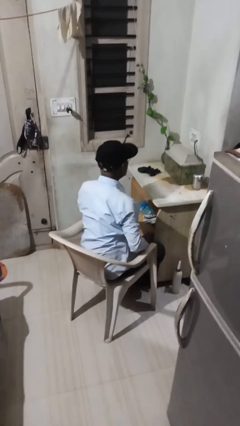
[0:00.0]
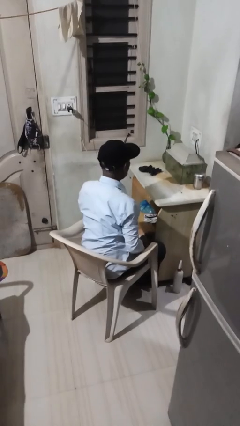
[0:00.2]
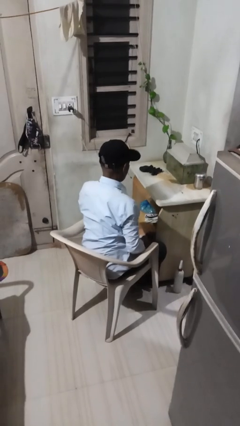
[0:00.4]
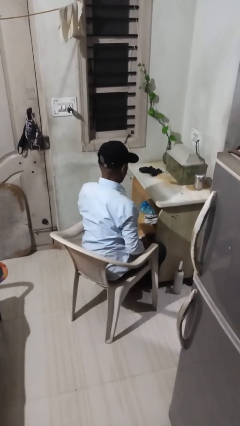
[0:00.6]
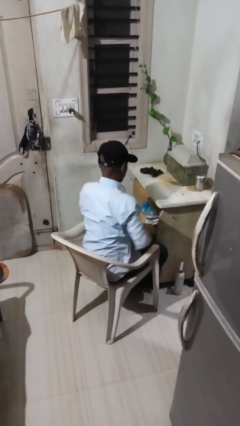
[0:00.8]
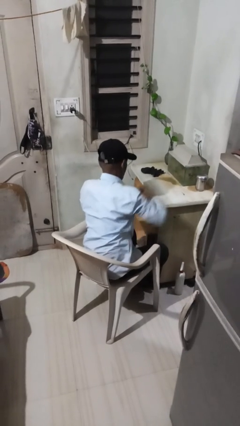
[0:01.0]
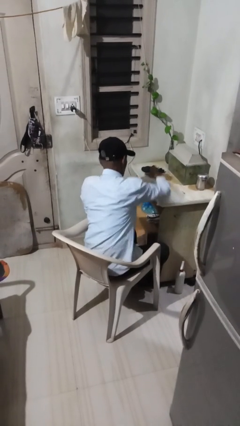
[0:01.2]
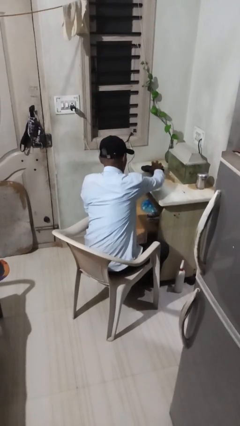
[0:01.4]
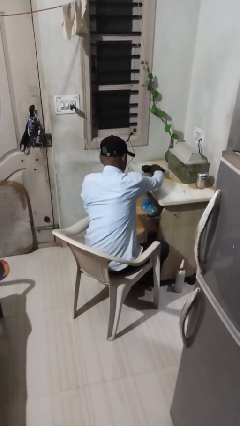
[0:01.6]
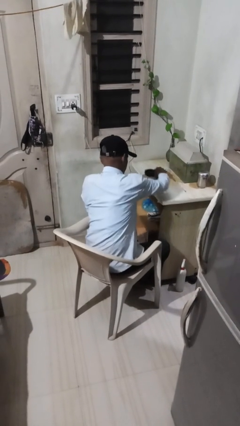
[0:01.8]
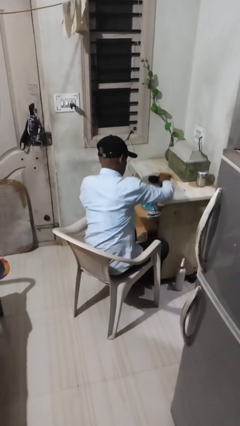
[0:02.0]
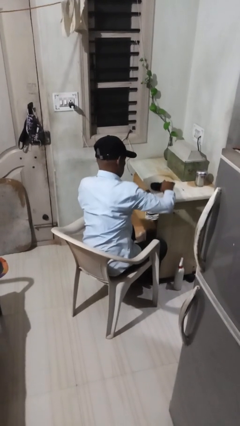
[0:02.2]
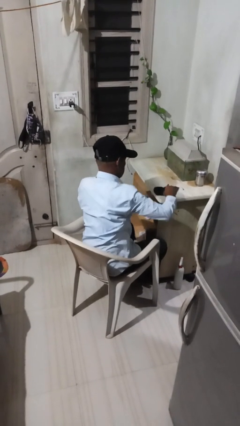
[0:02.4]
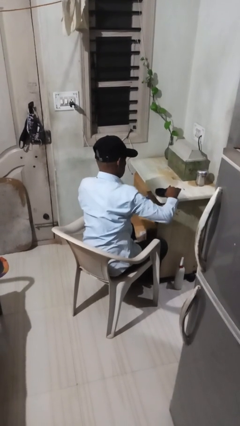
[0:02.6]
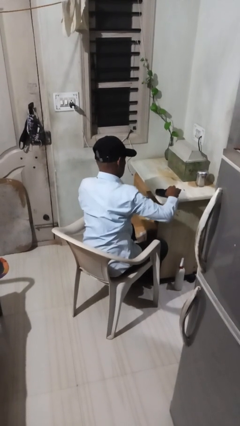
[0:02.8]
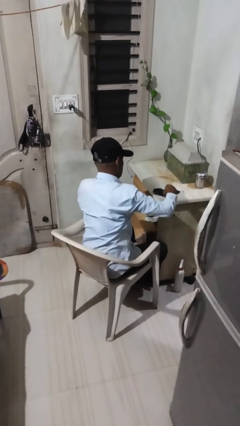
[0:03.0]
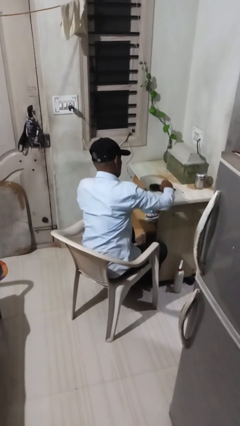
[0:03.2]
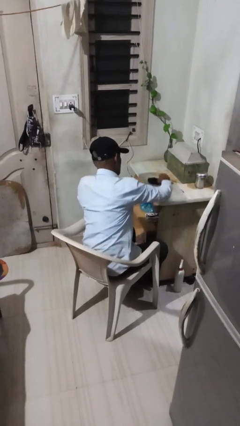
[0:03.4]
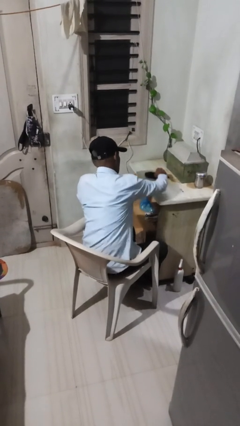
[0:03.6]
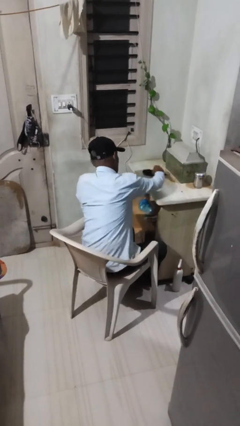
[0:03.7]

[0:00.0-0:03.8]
person cleans table with rag

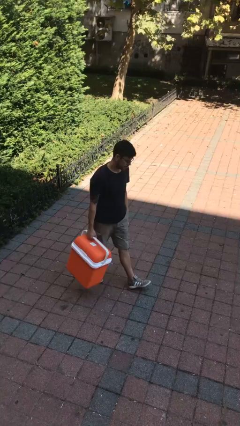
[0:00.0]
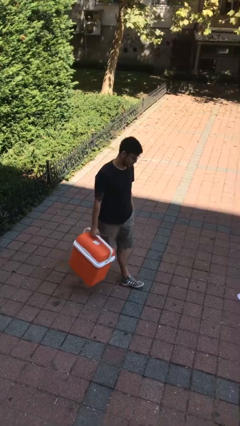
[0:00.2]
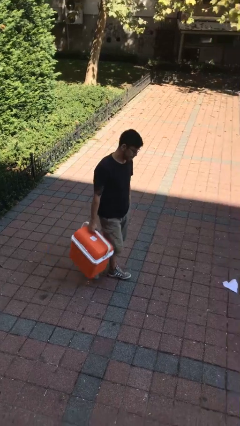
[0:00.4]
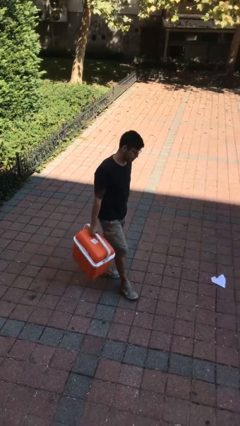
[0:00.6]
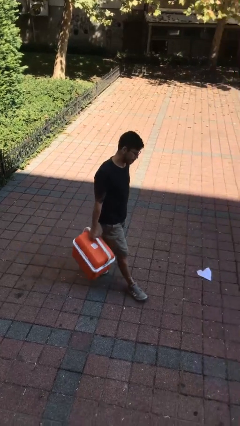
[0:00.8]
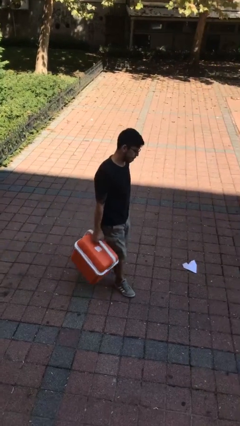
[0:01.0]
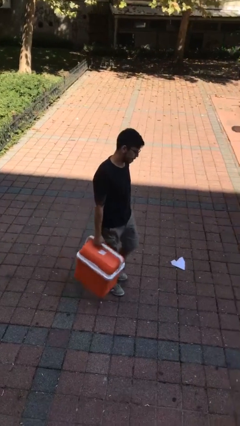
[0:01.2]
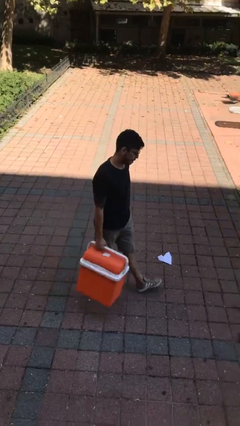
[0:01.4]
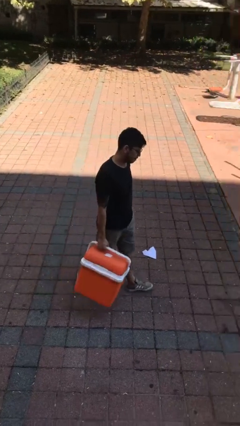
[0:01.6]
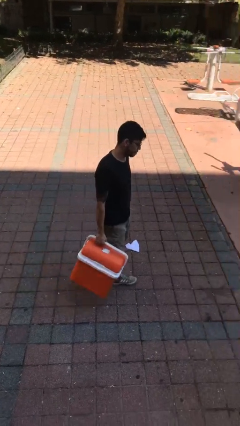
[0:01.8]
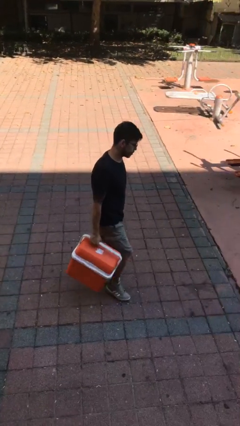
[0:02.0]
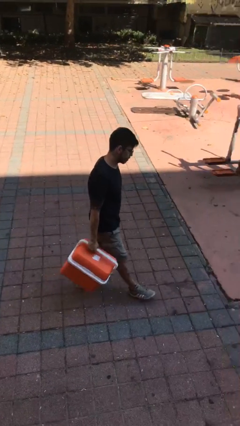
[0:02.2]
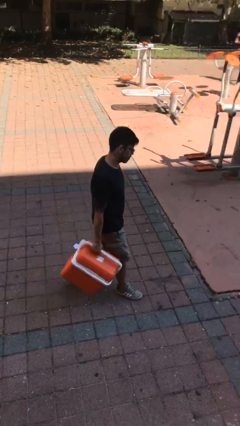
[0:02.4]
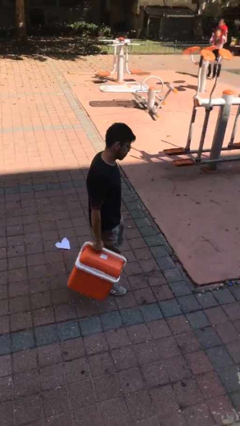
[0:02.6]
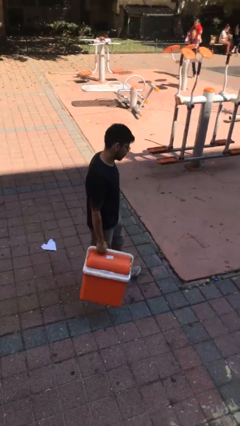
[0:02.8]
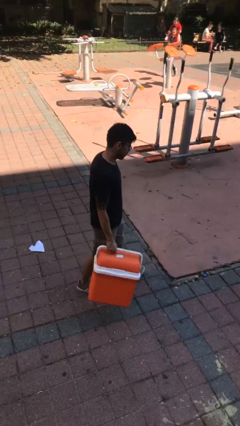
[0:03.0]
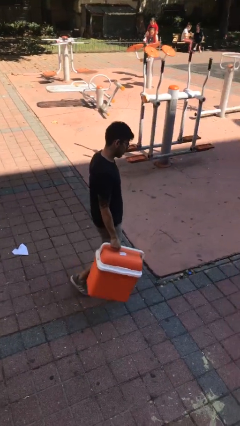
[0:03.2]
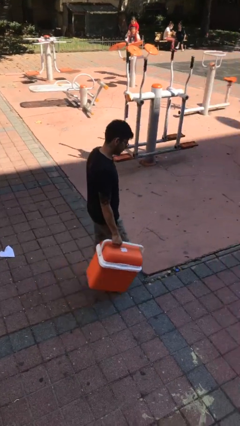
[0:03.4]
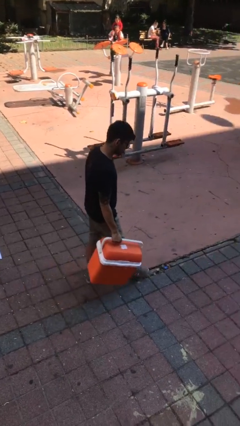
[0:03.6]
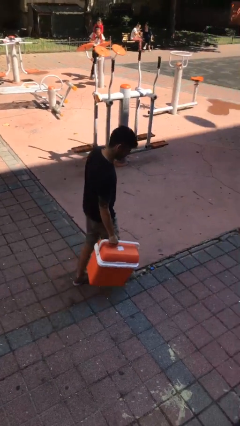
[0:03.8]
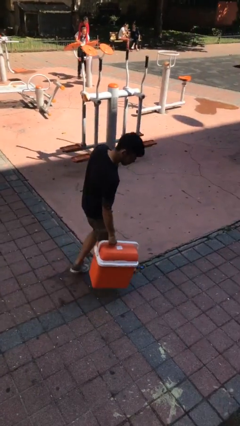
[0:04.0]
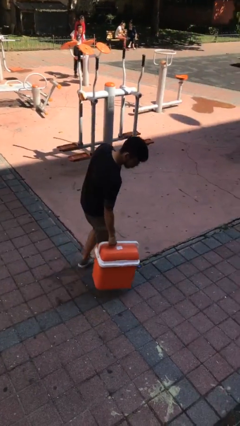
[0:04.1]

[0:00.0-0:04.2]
person carries heavy object

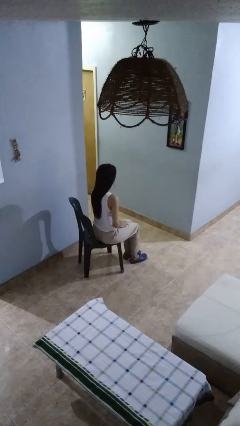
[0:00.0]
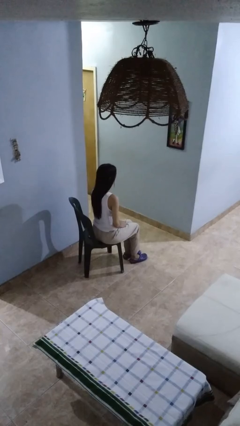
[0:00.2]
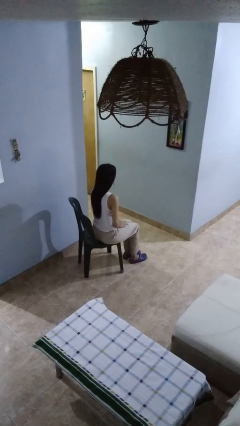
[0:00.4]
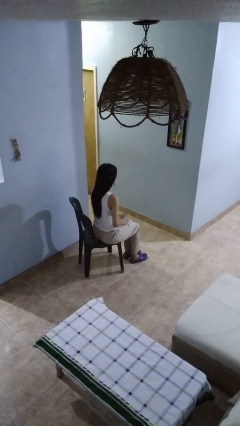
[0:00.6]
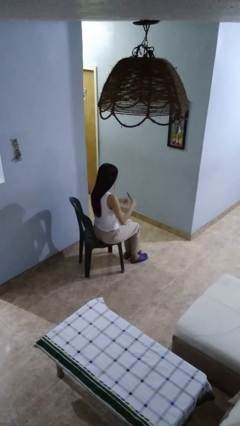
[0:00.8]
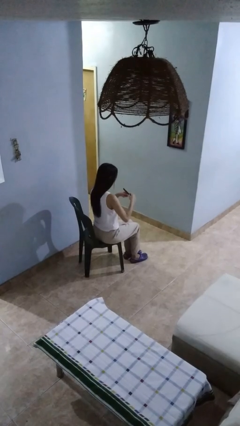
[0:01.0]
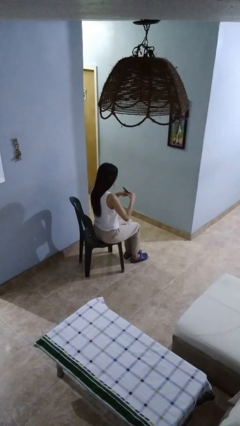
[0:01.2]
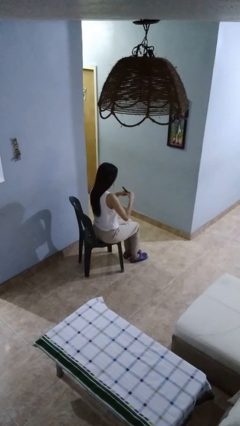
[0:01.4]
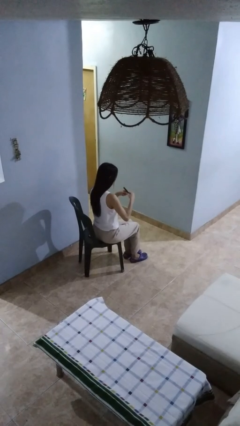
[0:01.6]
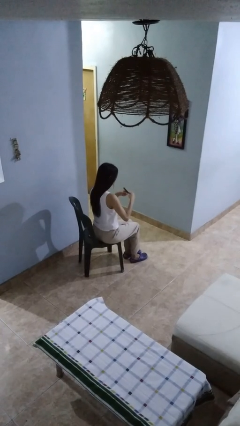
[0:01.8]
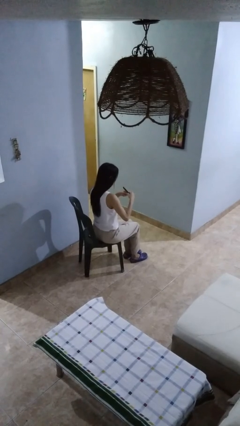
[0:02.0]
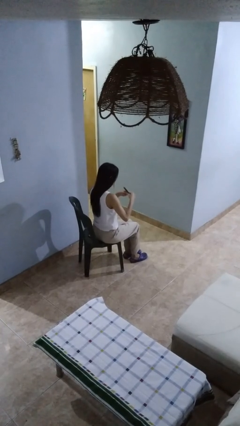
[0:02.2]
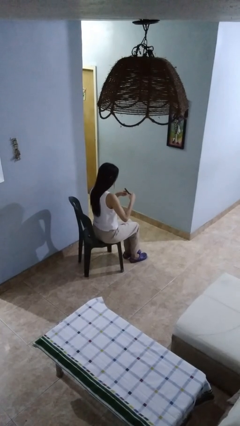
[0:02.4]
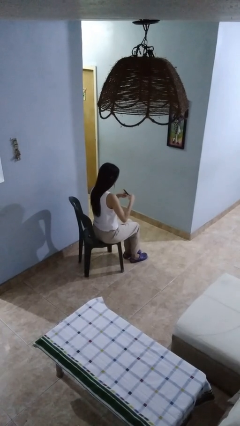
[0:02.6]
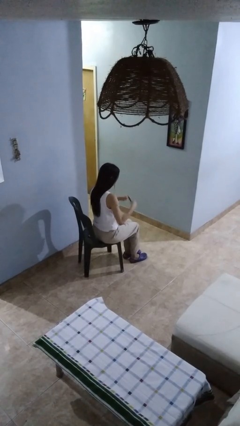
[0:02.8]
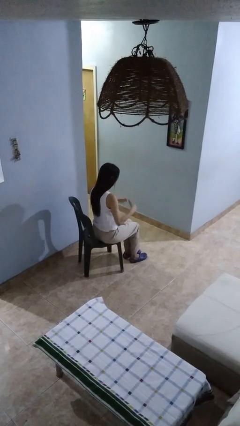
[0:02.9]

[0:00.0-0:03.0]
person files fingernails

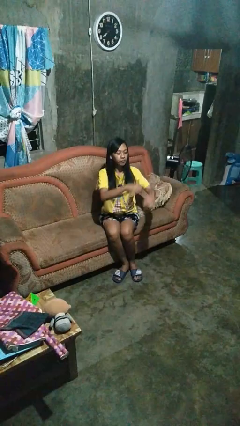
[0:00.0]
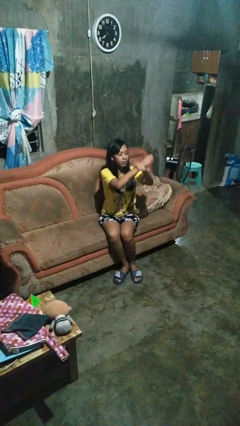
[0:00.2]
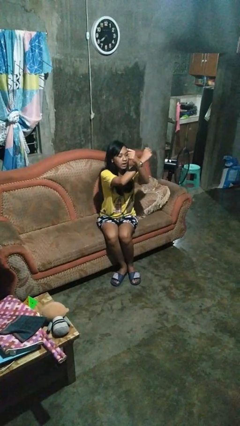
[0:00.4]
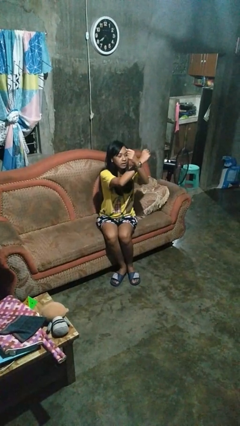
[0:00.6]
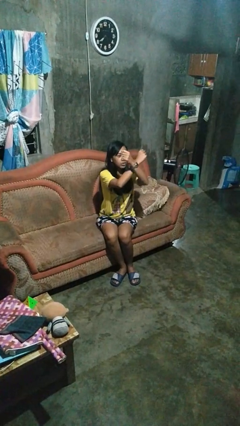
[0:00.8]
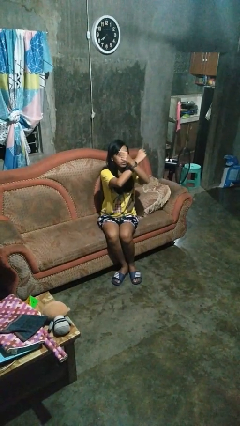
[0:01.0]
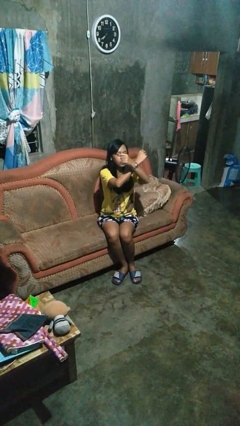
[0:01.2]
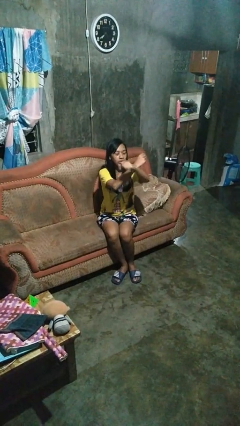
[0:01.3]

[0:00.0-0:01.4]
person gestures arms x

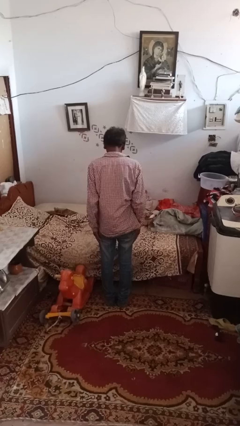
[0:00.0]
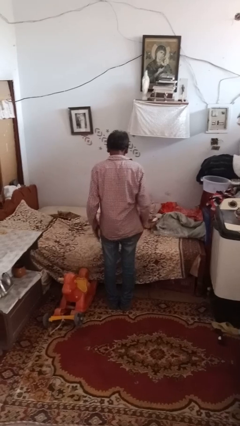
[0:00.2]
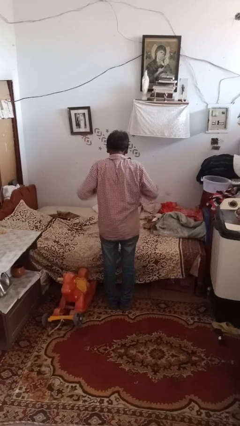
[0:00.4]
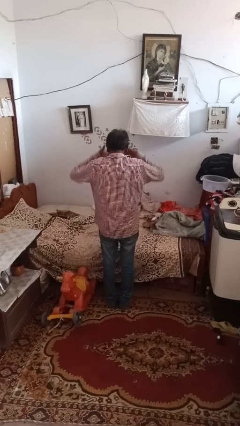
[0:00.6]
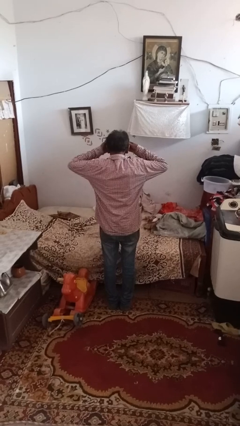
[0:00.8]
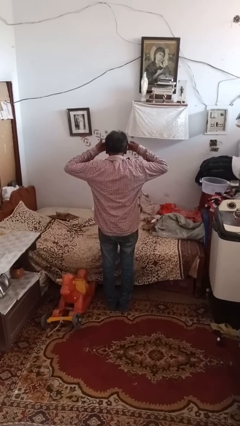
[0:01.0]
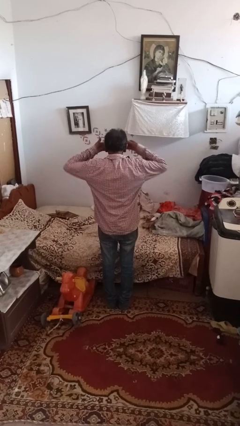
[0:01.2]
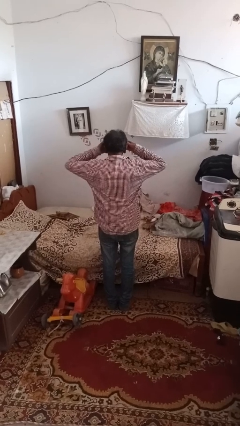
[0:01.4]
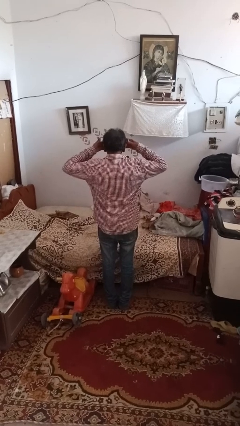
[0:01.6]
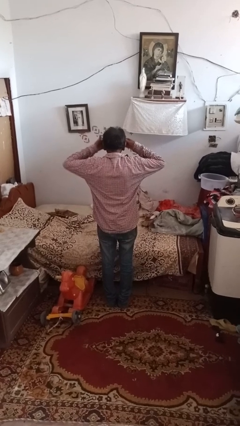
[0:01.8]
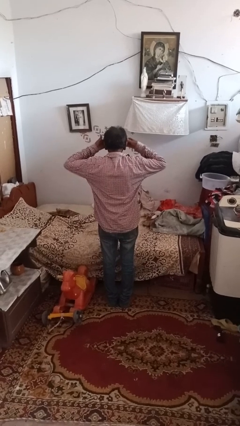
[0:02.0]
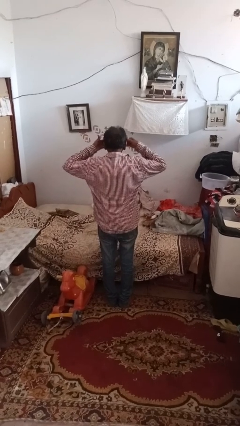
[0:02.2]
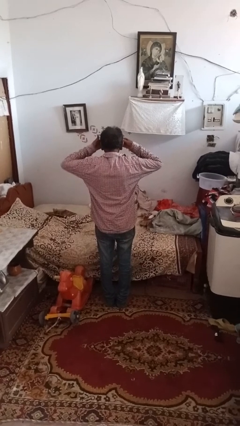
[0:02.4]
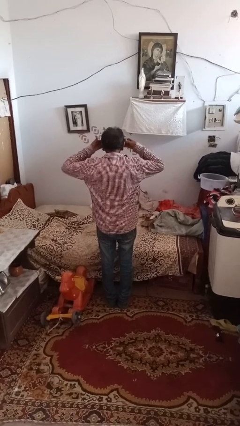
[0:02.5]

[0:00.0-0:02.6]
person rubs eyes

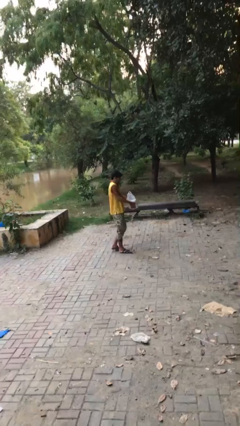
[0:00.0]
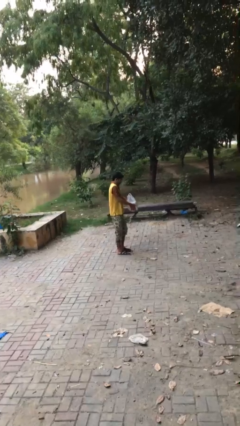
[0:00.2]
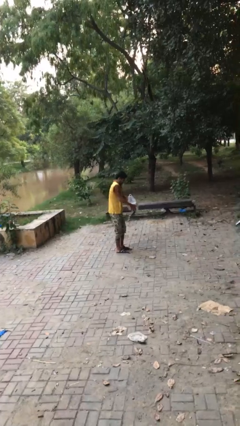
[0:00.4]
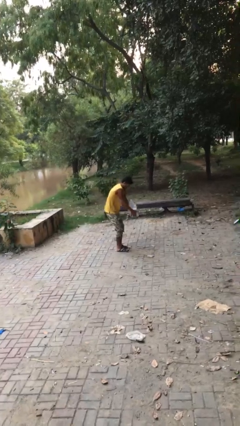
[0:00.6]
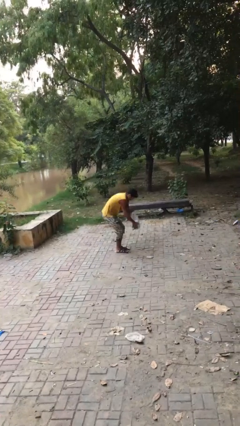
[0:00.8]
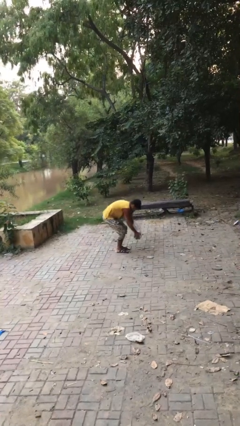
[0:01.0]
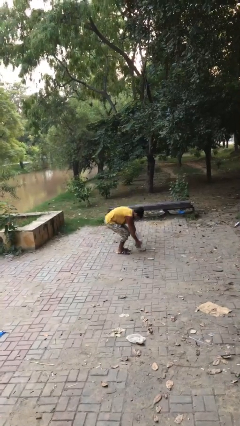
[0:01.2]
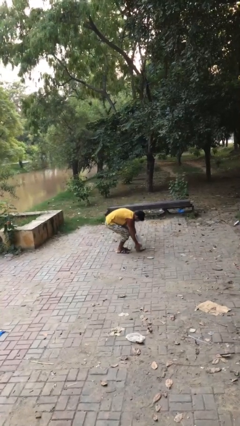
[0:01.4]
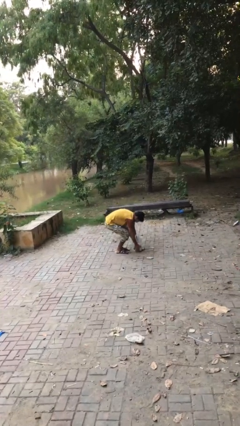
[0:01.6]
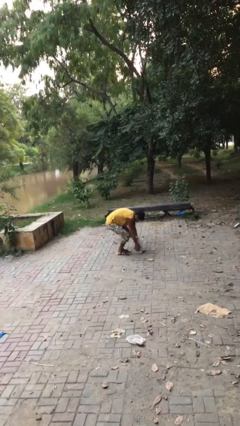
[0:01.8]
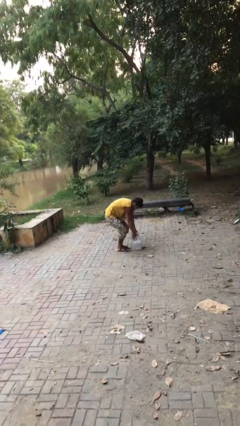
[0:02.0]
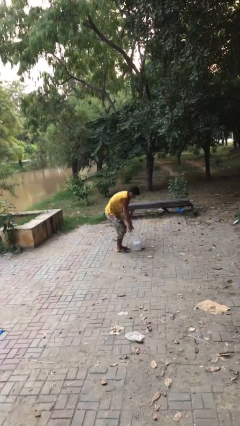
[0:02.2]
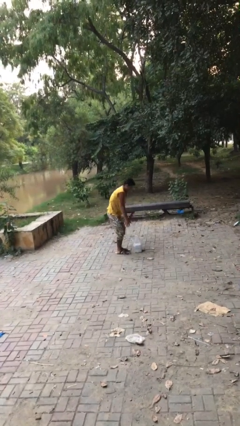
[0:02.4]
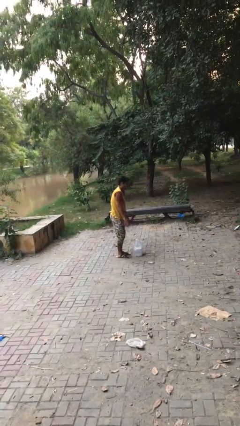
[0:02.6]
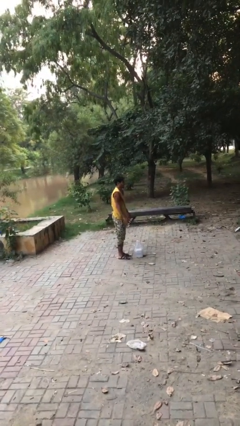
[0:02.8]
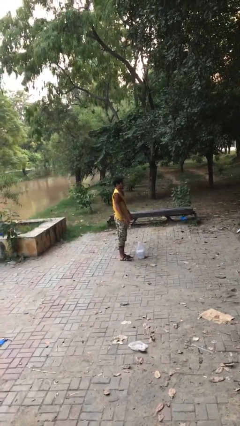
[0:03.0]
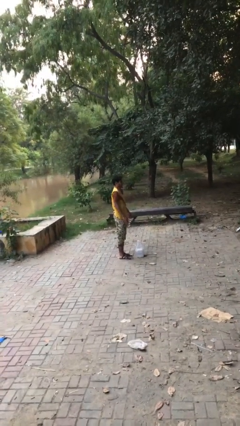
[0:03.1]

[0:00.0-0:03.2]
person puts down object on floor
